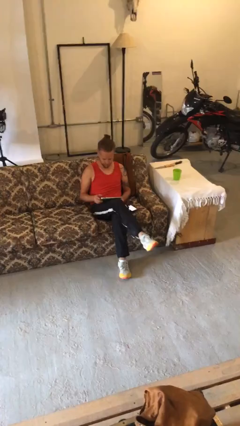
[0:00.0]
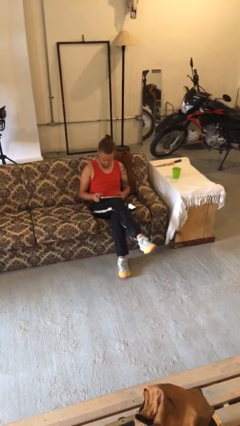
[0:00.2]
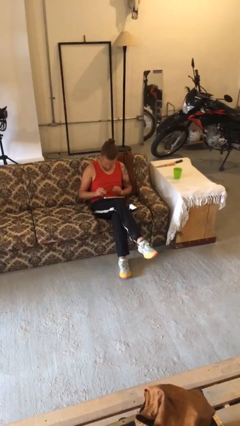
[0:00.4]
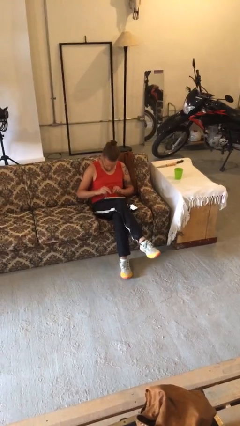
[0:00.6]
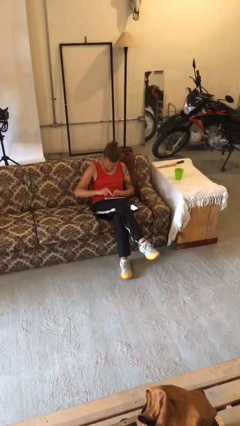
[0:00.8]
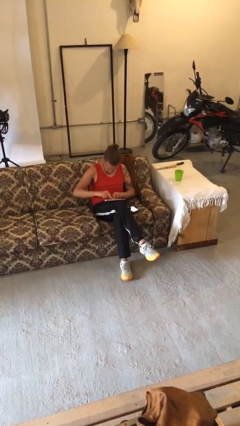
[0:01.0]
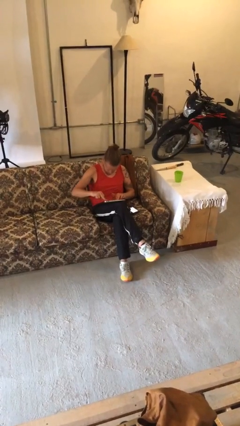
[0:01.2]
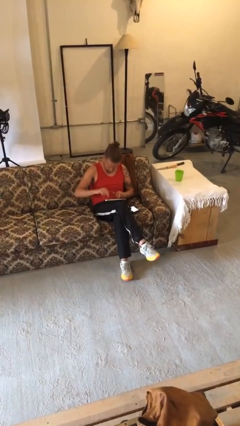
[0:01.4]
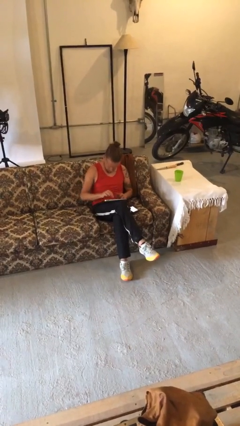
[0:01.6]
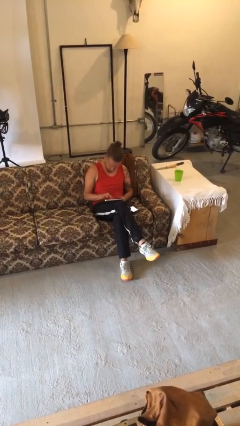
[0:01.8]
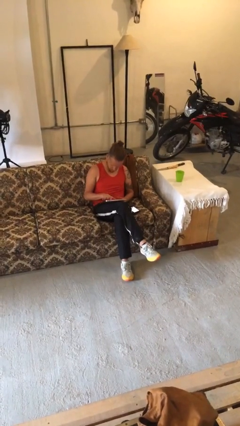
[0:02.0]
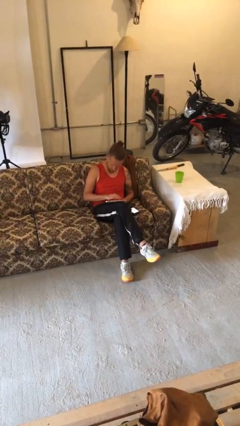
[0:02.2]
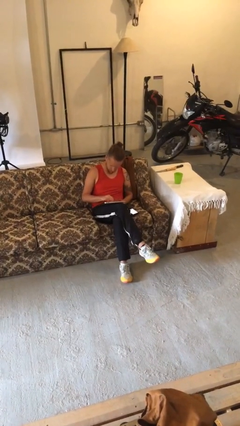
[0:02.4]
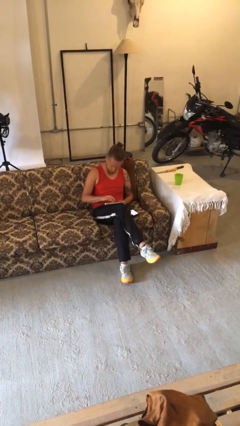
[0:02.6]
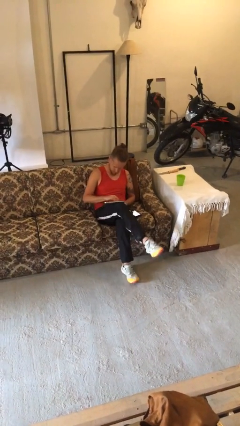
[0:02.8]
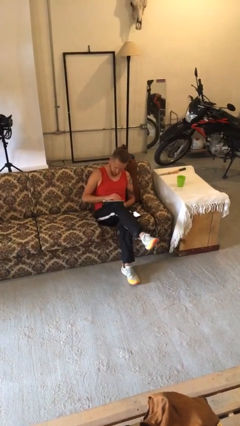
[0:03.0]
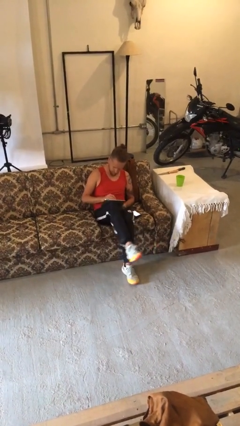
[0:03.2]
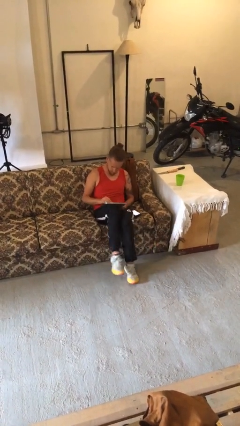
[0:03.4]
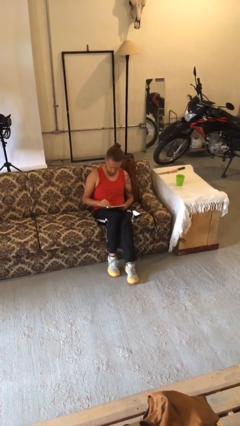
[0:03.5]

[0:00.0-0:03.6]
person interacts with tablet

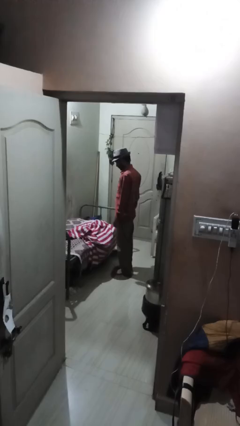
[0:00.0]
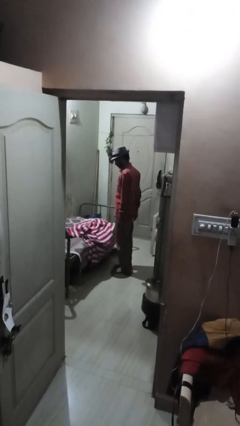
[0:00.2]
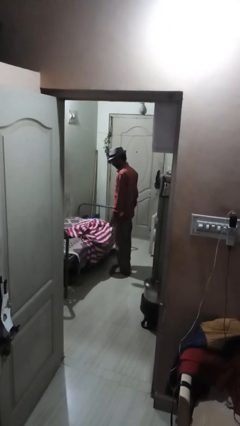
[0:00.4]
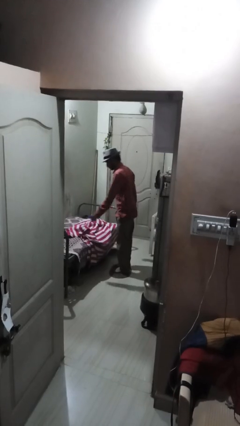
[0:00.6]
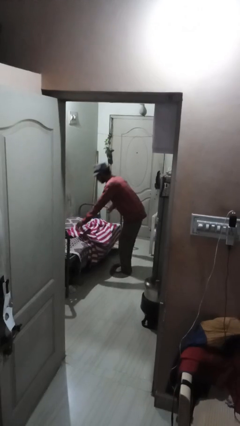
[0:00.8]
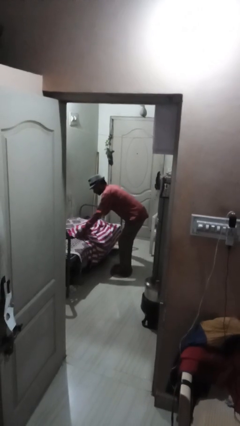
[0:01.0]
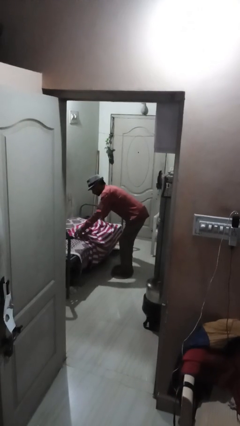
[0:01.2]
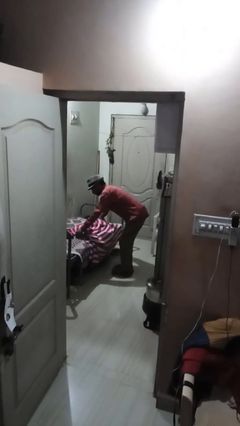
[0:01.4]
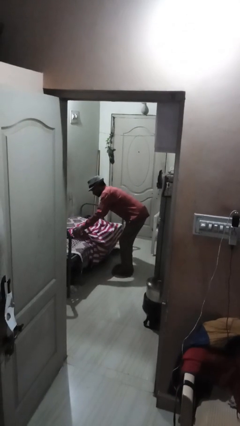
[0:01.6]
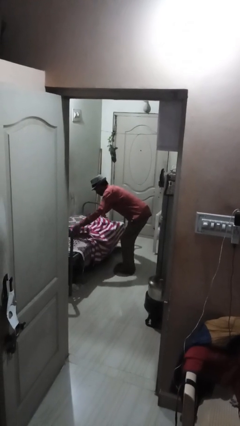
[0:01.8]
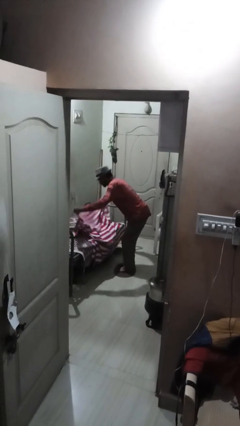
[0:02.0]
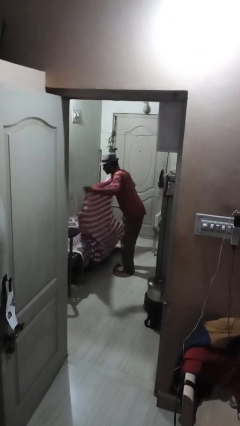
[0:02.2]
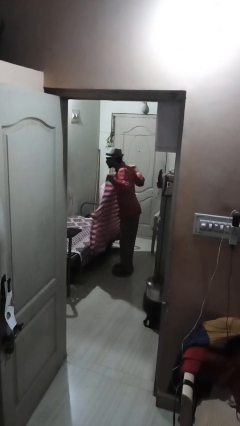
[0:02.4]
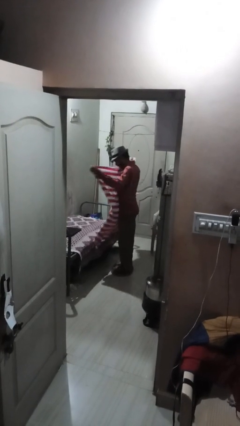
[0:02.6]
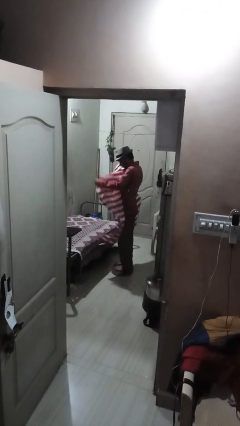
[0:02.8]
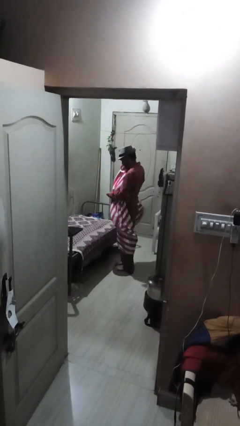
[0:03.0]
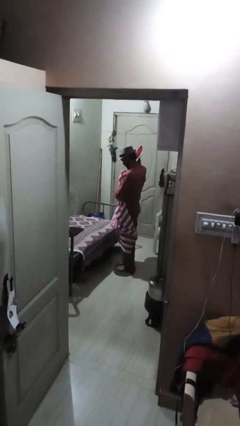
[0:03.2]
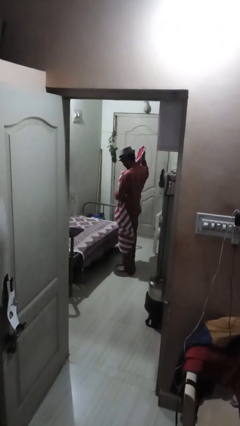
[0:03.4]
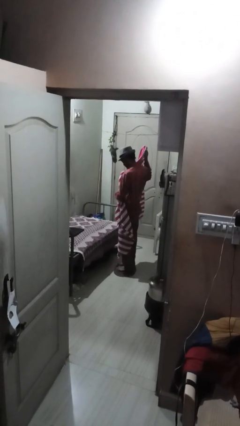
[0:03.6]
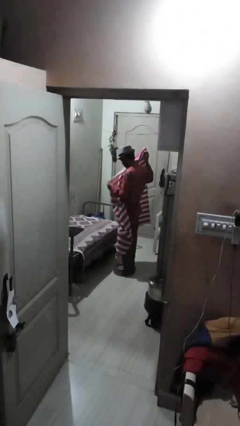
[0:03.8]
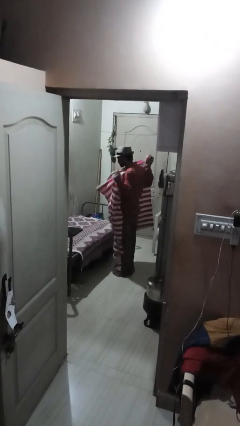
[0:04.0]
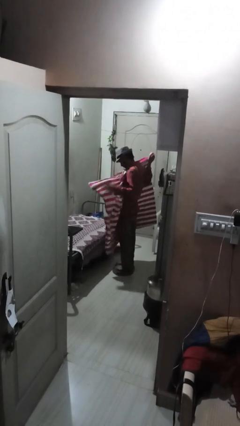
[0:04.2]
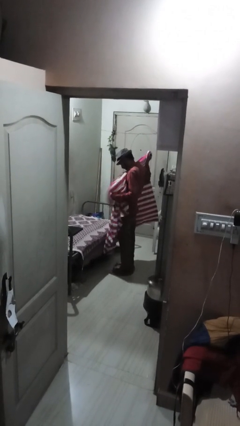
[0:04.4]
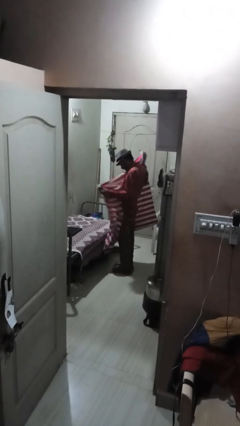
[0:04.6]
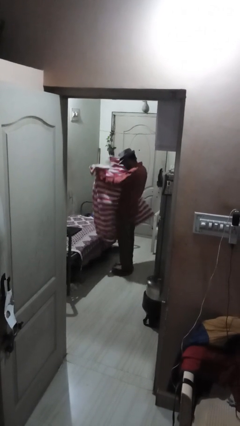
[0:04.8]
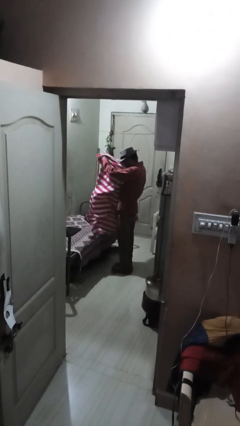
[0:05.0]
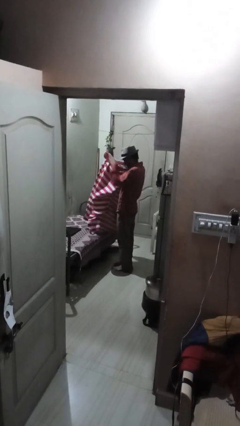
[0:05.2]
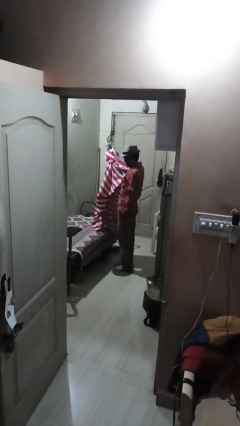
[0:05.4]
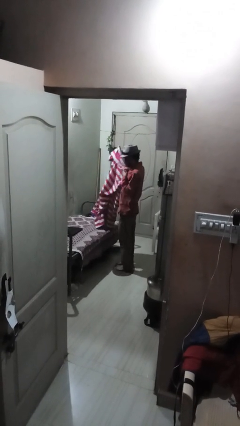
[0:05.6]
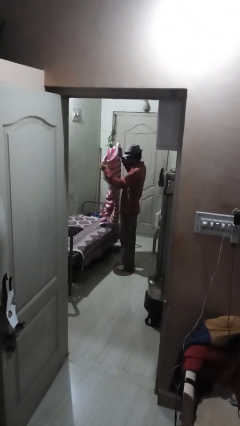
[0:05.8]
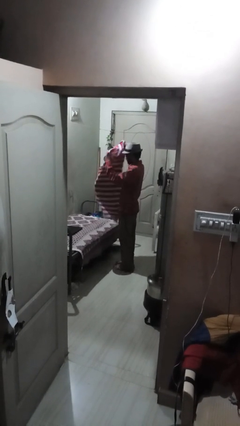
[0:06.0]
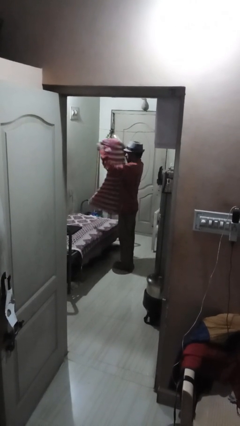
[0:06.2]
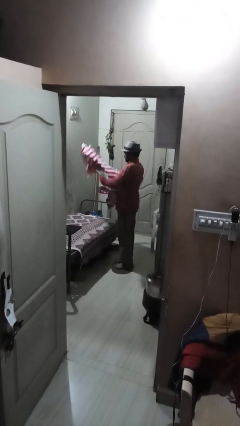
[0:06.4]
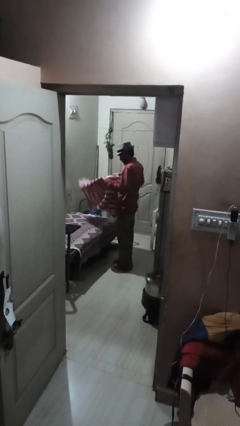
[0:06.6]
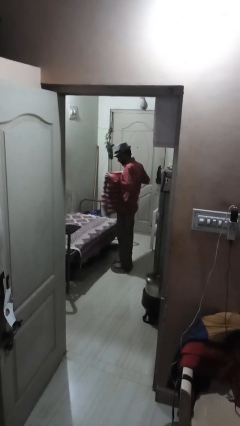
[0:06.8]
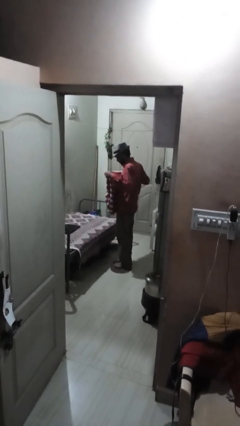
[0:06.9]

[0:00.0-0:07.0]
person folds blanket

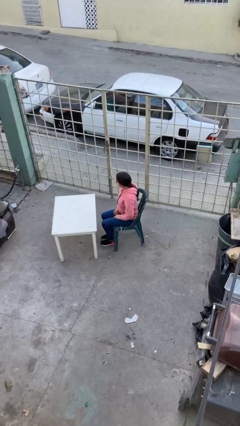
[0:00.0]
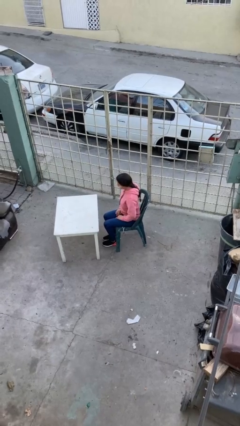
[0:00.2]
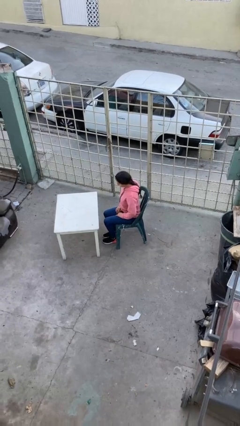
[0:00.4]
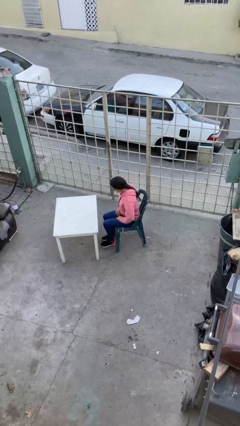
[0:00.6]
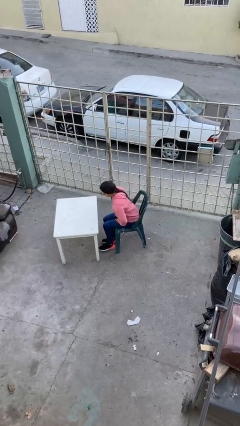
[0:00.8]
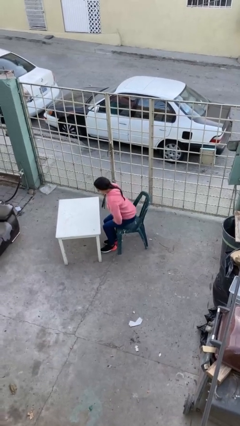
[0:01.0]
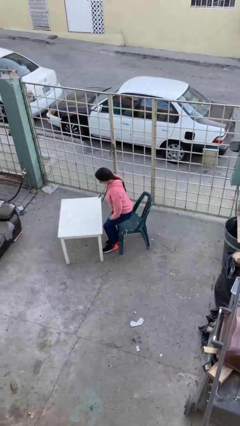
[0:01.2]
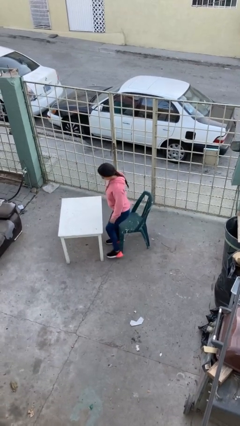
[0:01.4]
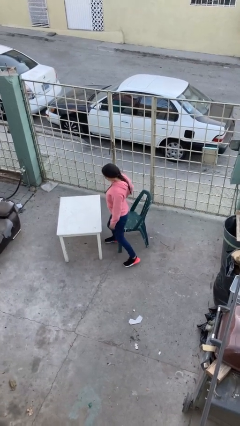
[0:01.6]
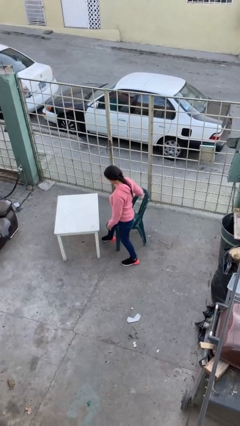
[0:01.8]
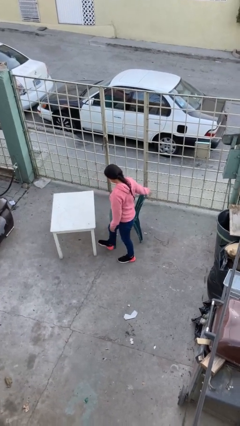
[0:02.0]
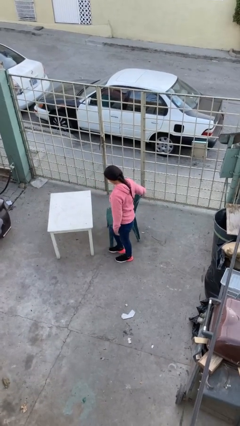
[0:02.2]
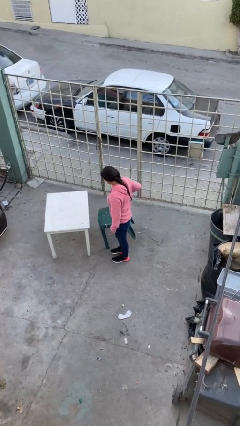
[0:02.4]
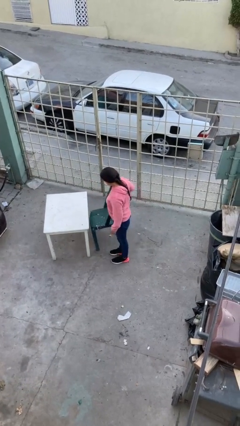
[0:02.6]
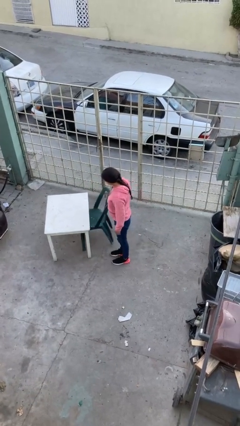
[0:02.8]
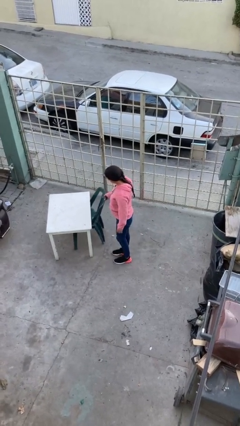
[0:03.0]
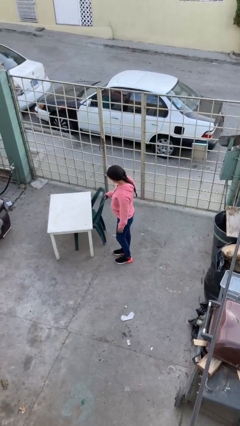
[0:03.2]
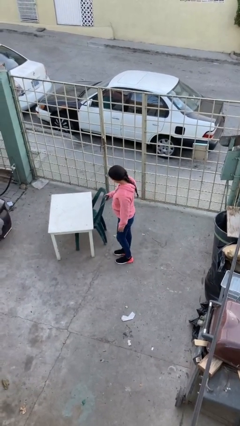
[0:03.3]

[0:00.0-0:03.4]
person stands up

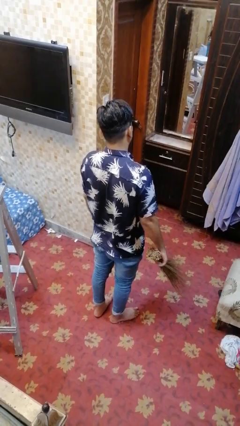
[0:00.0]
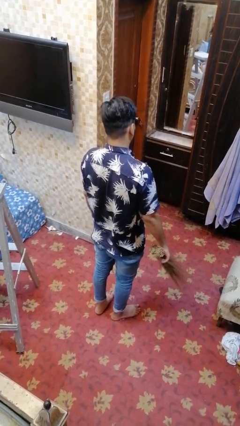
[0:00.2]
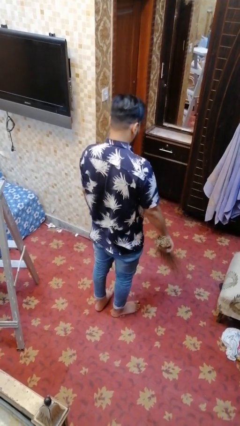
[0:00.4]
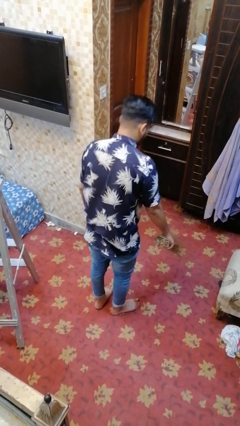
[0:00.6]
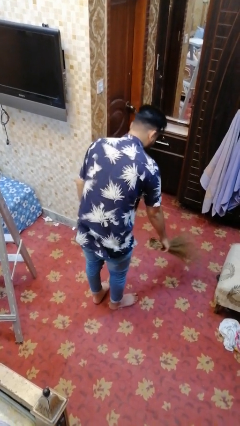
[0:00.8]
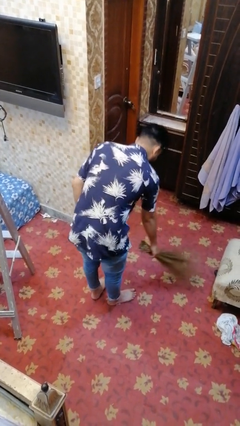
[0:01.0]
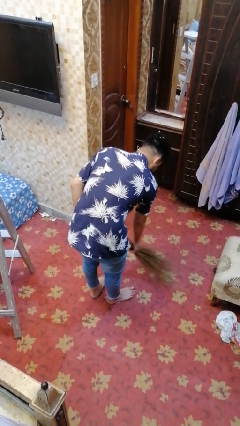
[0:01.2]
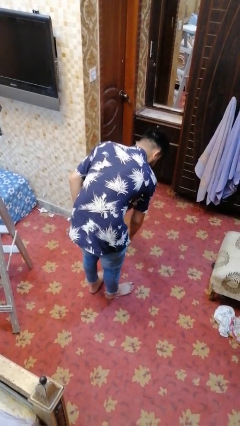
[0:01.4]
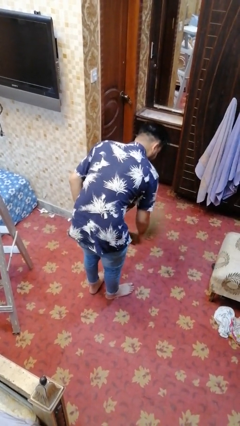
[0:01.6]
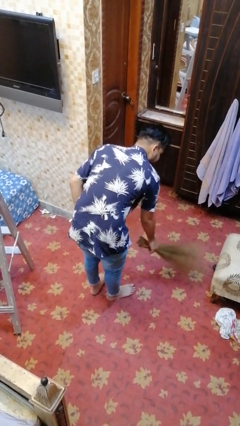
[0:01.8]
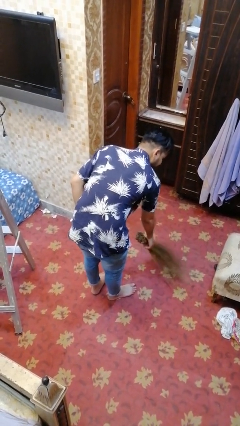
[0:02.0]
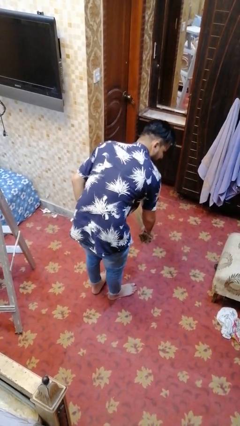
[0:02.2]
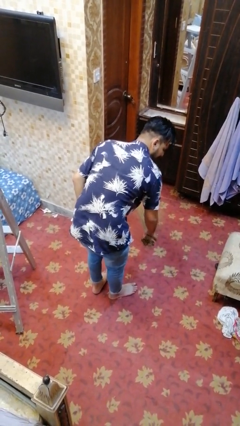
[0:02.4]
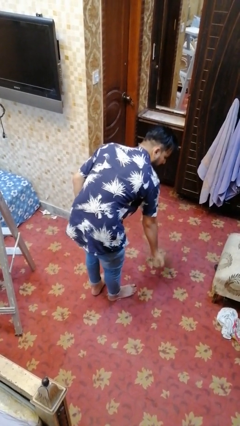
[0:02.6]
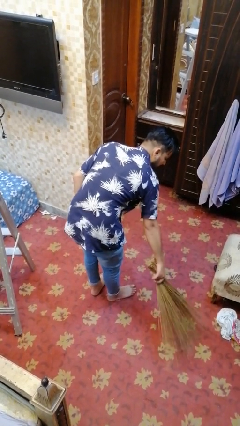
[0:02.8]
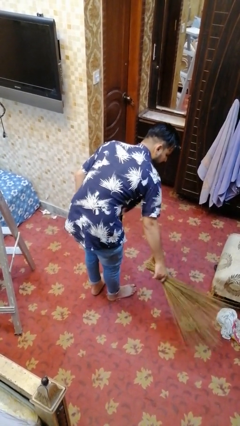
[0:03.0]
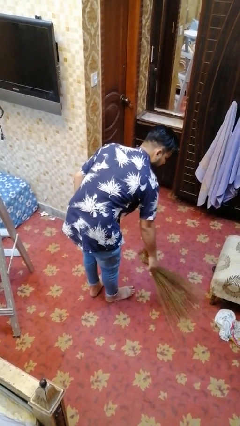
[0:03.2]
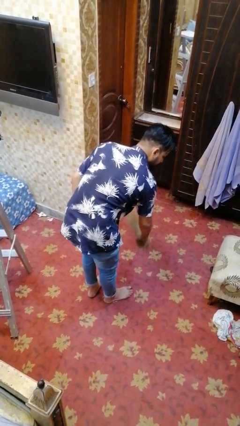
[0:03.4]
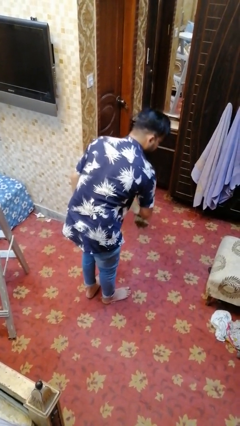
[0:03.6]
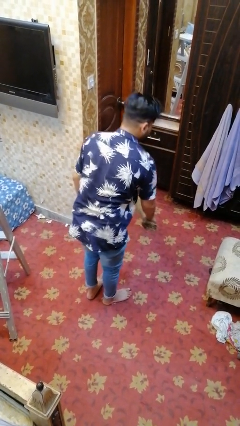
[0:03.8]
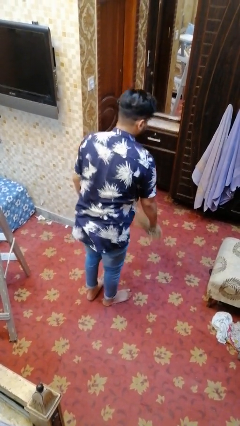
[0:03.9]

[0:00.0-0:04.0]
person sweeps floor
